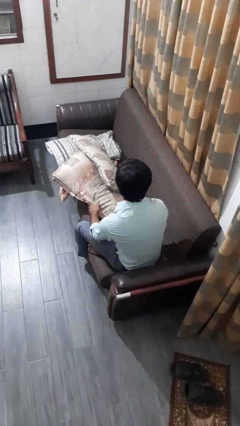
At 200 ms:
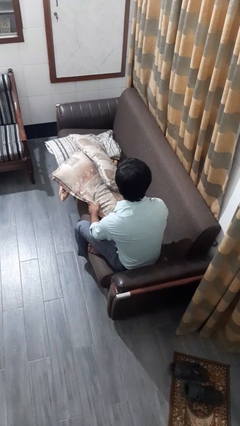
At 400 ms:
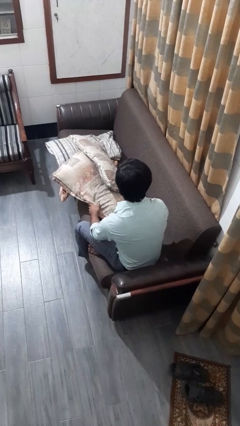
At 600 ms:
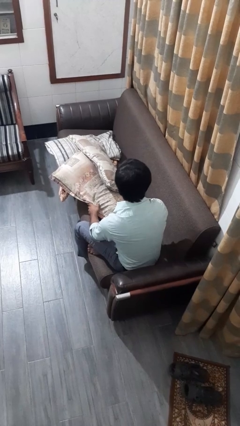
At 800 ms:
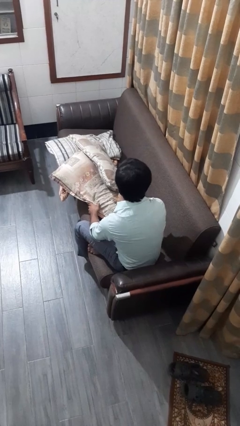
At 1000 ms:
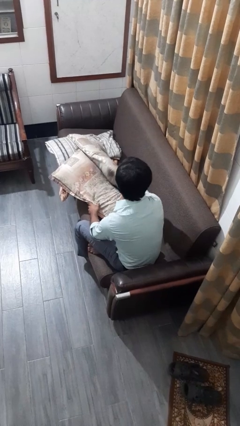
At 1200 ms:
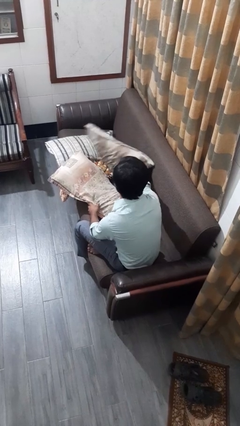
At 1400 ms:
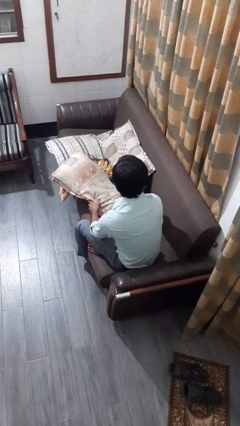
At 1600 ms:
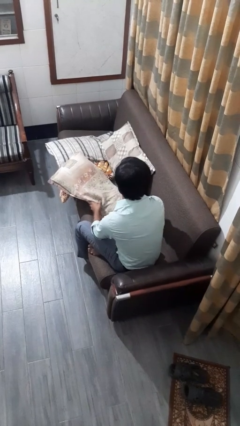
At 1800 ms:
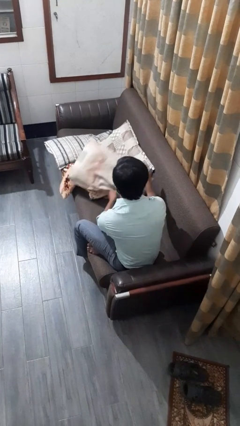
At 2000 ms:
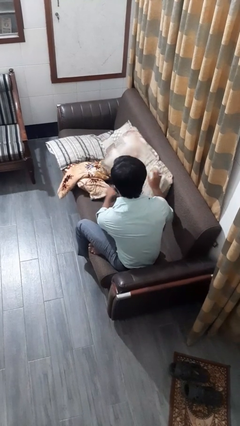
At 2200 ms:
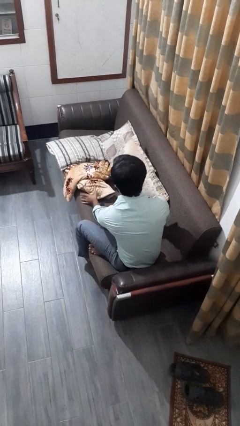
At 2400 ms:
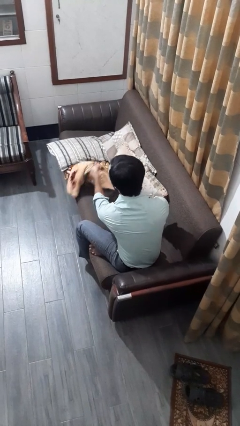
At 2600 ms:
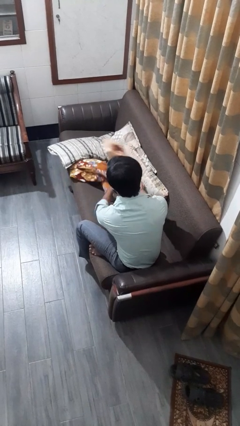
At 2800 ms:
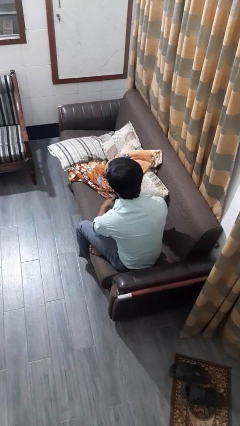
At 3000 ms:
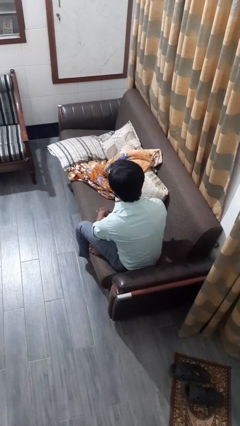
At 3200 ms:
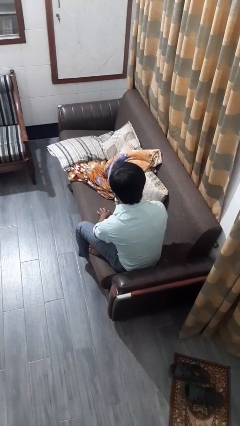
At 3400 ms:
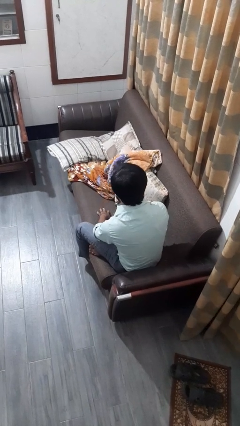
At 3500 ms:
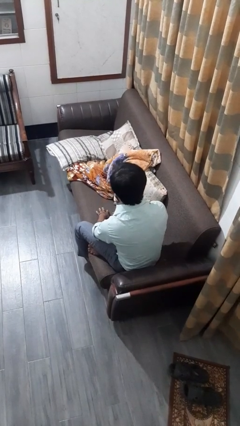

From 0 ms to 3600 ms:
person searches in couch

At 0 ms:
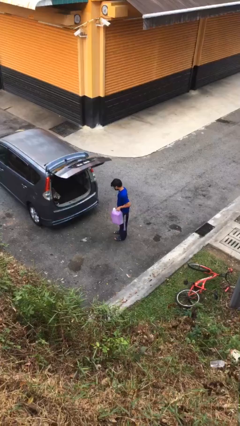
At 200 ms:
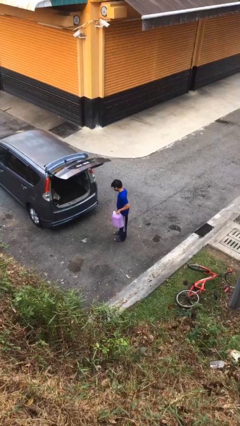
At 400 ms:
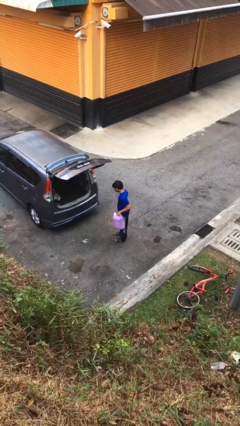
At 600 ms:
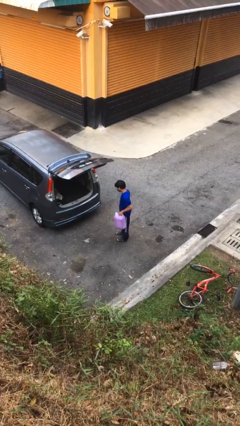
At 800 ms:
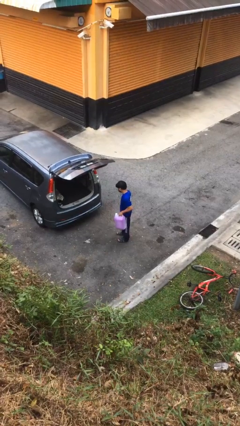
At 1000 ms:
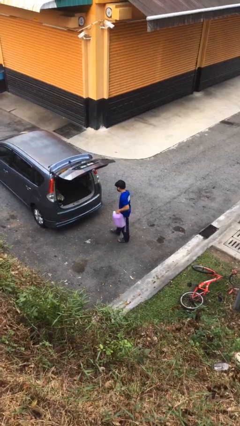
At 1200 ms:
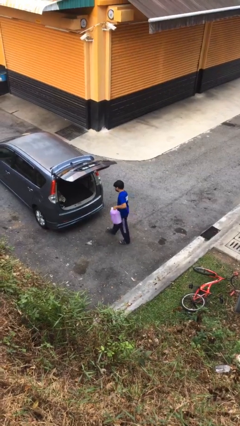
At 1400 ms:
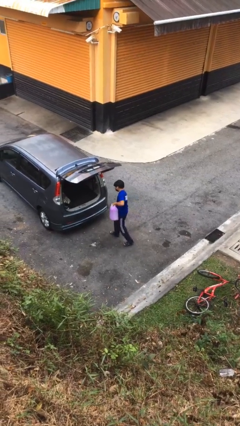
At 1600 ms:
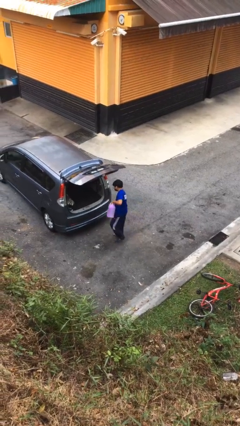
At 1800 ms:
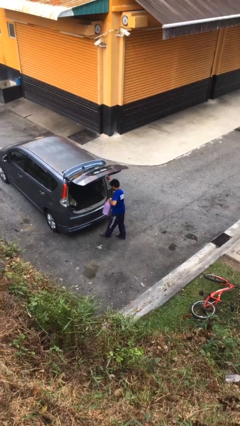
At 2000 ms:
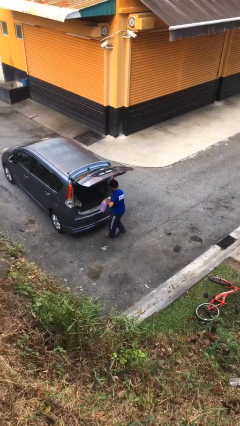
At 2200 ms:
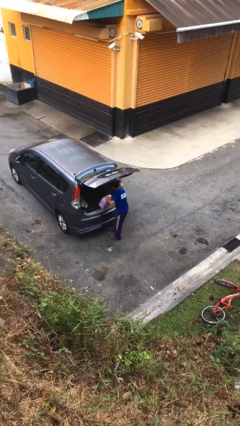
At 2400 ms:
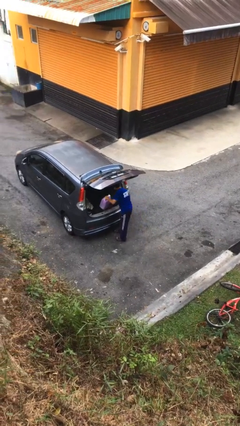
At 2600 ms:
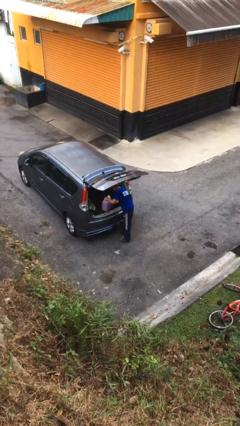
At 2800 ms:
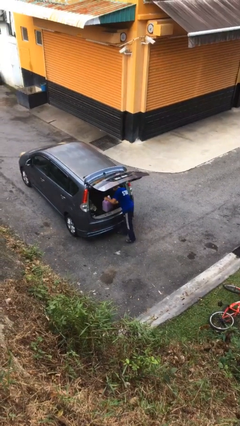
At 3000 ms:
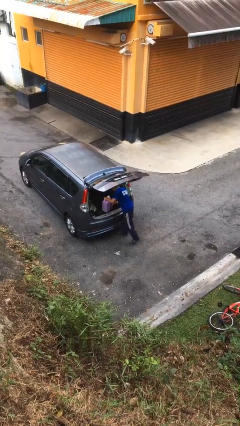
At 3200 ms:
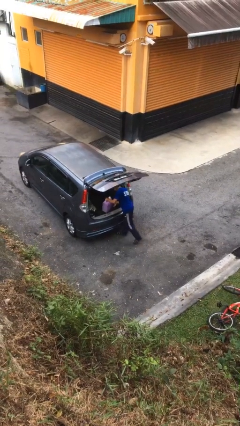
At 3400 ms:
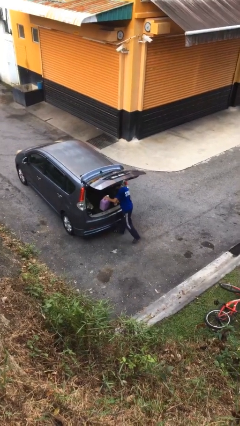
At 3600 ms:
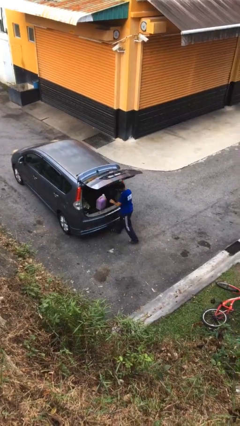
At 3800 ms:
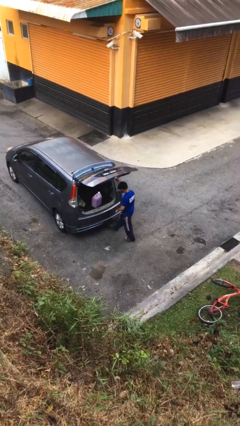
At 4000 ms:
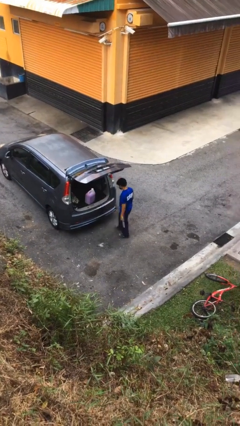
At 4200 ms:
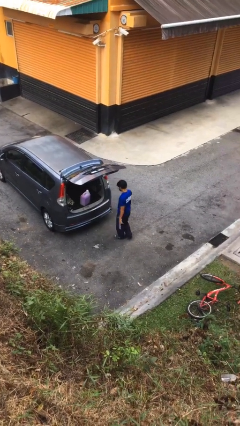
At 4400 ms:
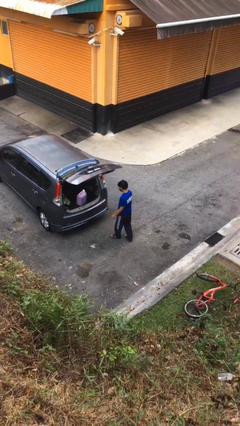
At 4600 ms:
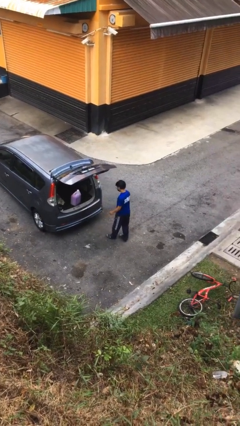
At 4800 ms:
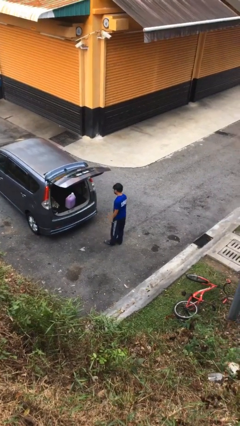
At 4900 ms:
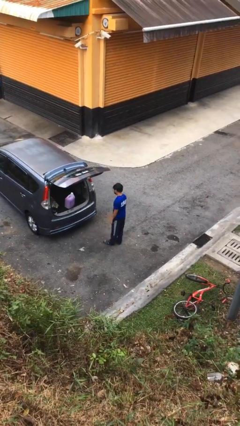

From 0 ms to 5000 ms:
person loads car

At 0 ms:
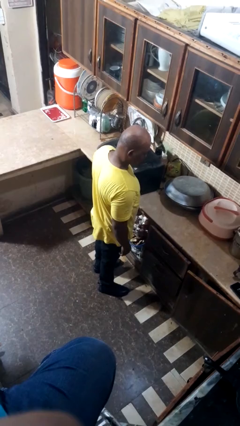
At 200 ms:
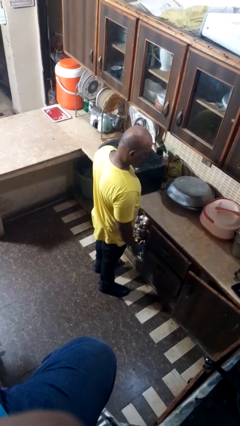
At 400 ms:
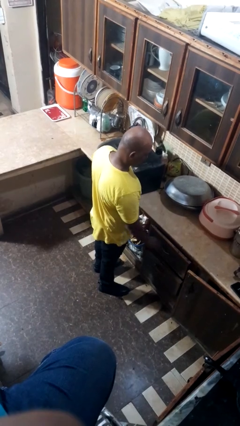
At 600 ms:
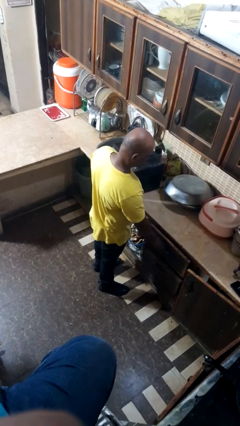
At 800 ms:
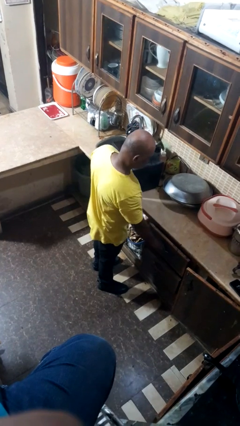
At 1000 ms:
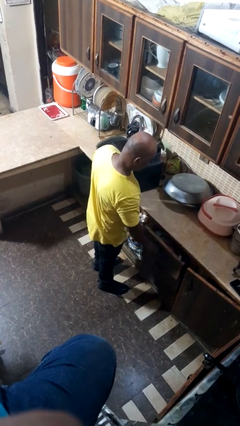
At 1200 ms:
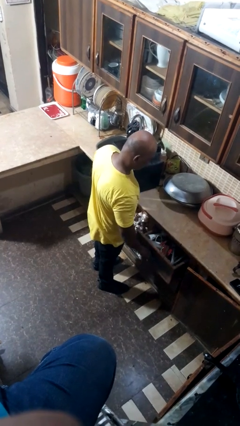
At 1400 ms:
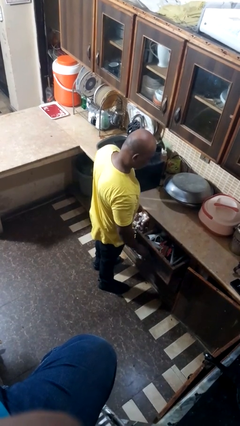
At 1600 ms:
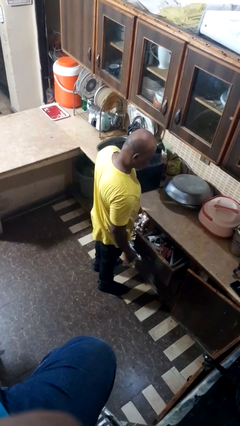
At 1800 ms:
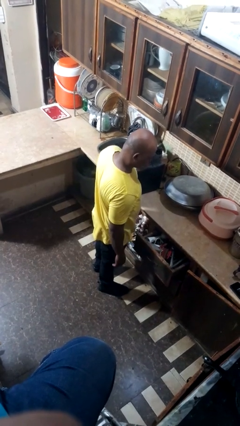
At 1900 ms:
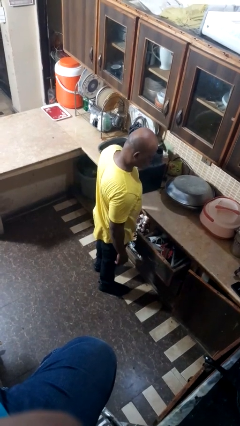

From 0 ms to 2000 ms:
person opens dresser drawer

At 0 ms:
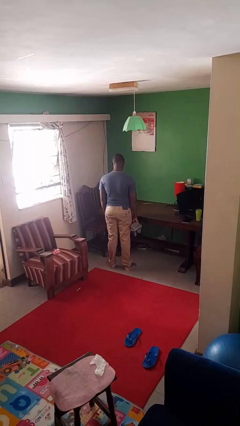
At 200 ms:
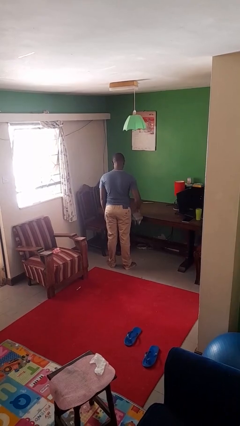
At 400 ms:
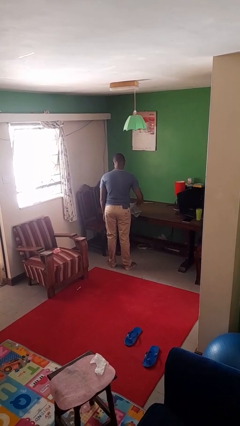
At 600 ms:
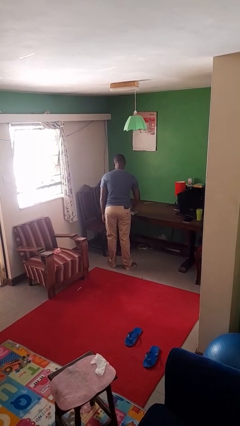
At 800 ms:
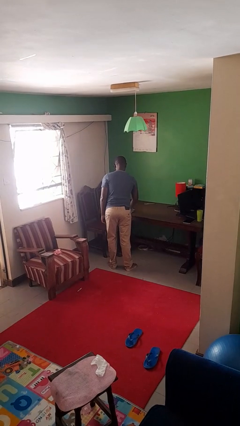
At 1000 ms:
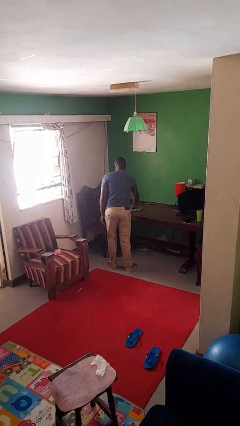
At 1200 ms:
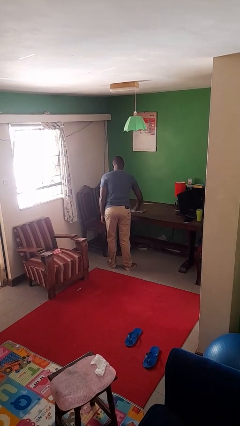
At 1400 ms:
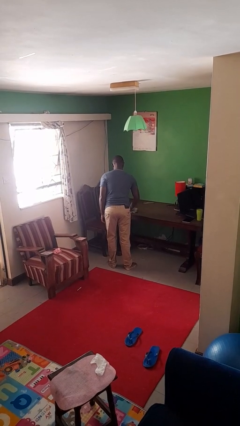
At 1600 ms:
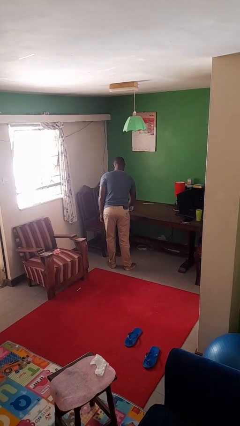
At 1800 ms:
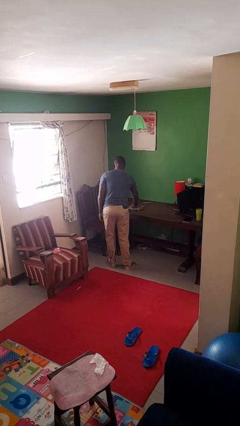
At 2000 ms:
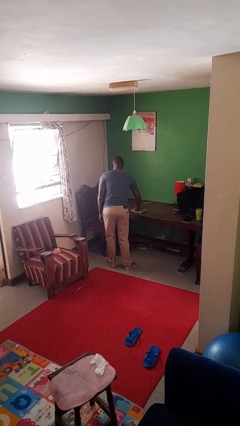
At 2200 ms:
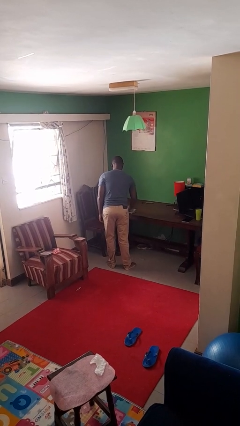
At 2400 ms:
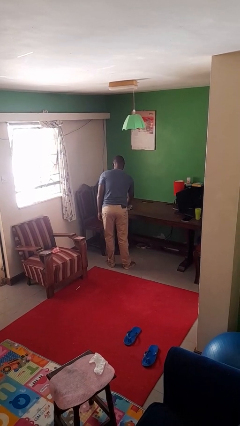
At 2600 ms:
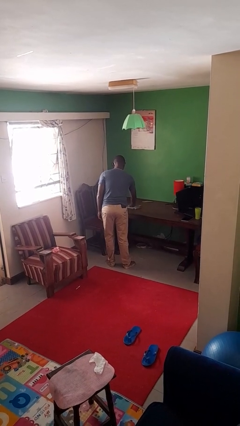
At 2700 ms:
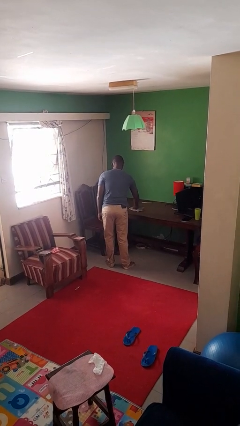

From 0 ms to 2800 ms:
person cleans table with rag

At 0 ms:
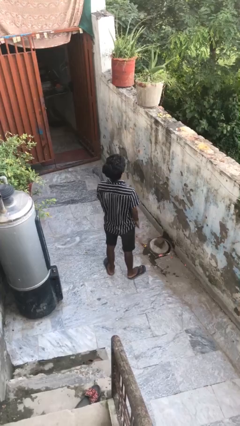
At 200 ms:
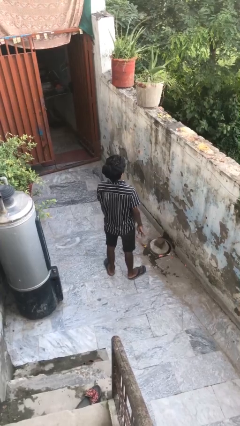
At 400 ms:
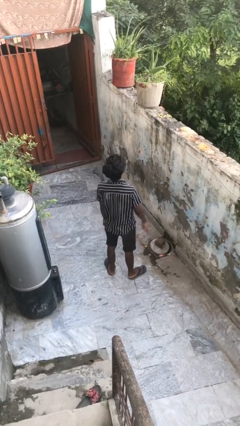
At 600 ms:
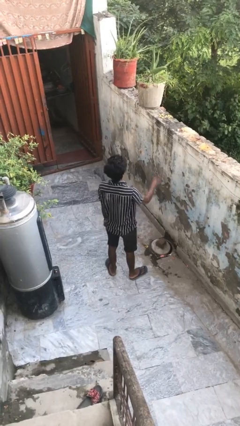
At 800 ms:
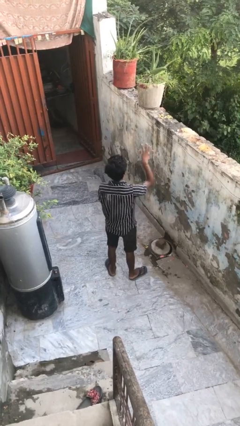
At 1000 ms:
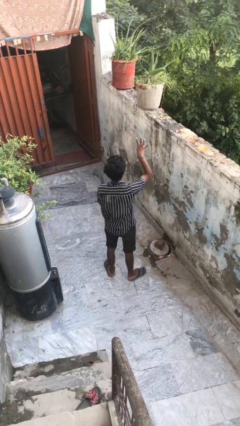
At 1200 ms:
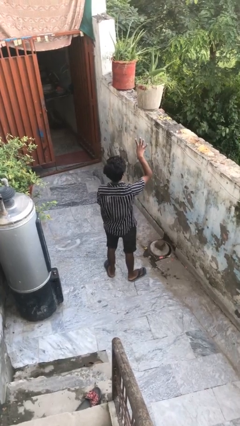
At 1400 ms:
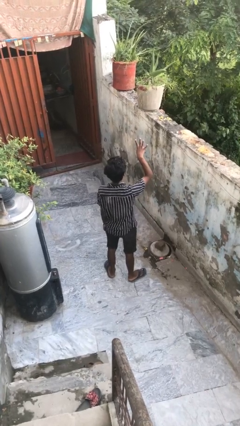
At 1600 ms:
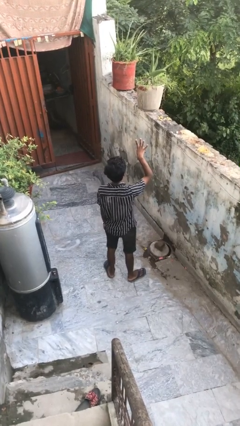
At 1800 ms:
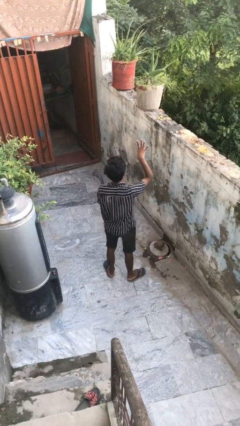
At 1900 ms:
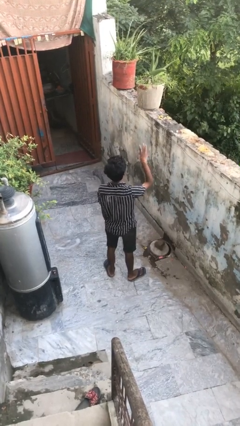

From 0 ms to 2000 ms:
person gestures number four

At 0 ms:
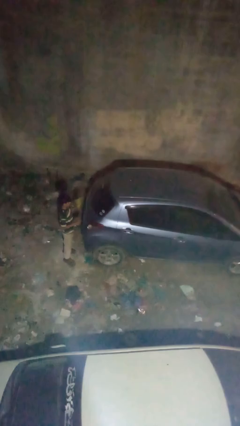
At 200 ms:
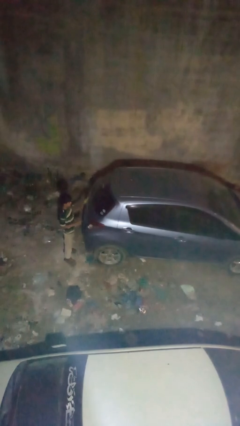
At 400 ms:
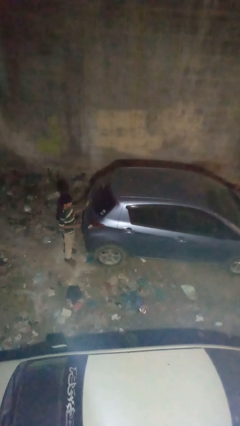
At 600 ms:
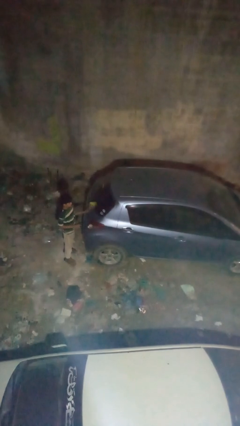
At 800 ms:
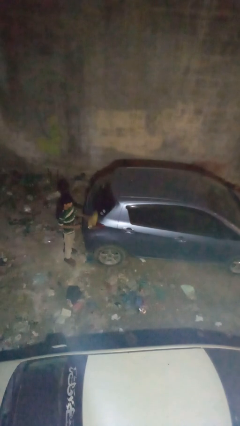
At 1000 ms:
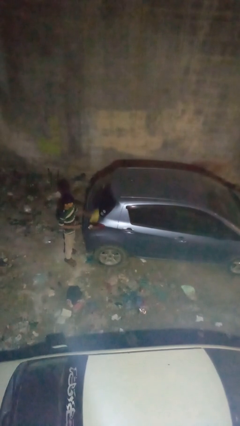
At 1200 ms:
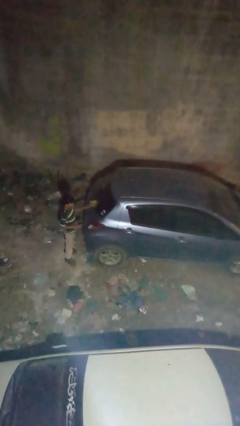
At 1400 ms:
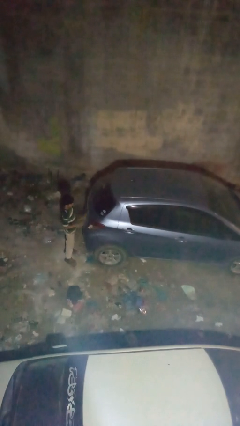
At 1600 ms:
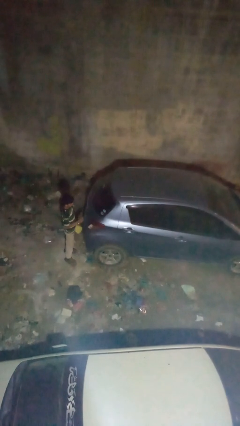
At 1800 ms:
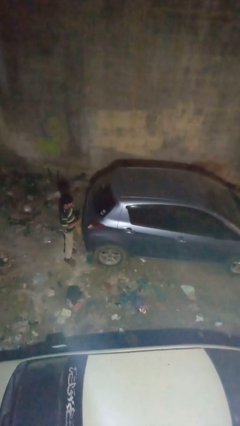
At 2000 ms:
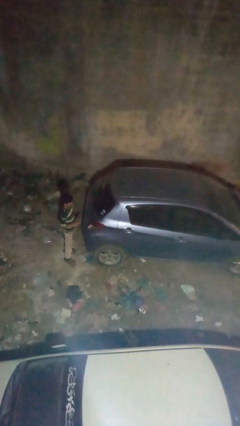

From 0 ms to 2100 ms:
person polishes car with rag

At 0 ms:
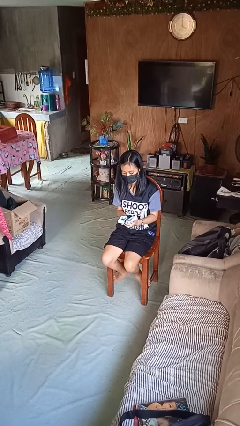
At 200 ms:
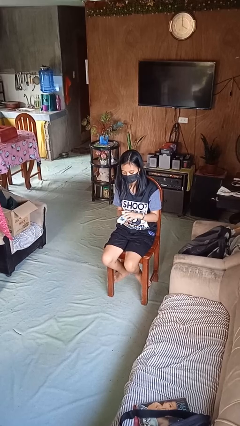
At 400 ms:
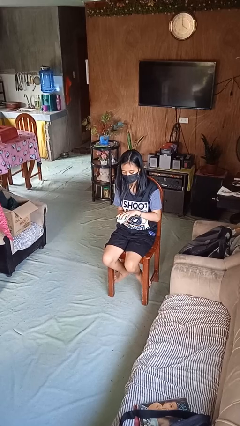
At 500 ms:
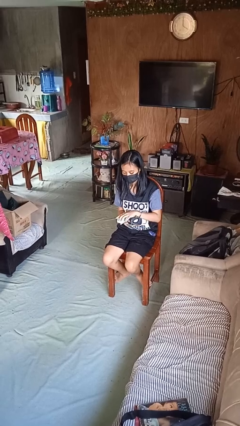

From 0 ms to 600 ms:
person closes jewelry box
